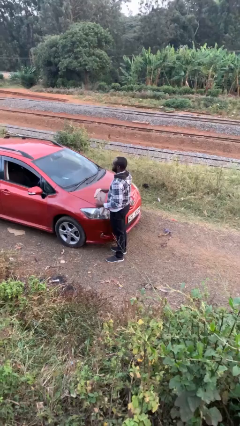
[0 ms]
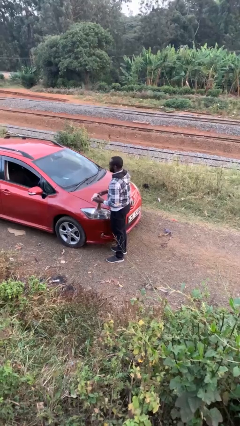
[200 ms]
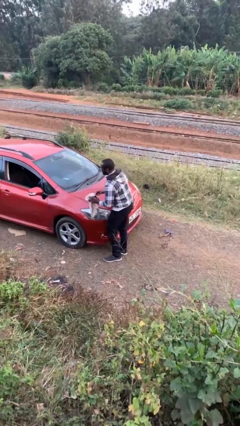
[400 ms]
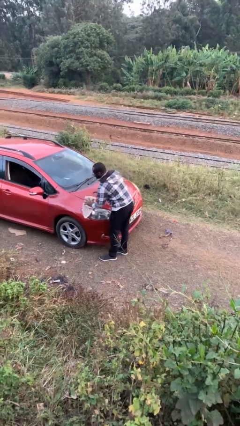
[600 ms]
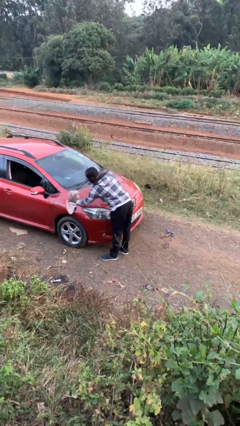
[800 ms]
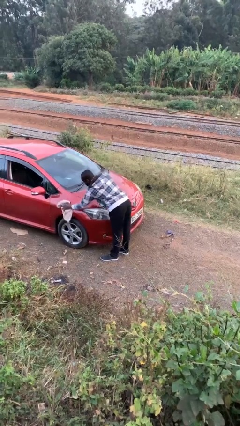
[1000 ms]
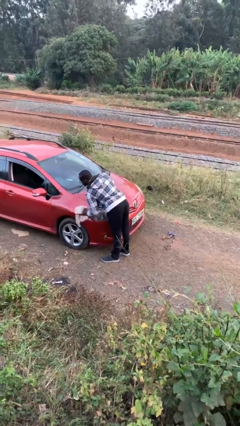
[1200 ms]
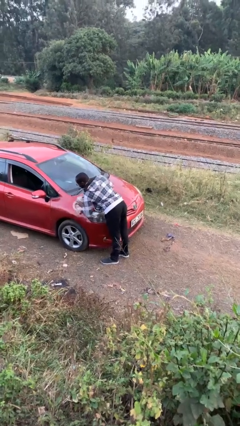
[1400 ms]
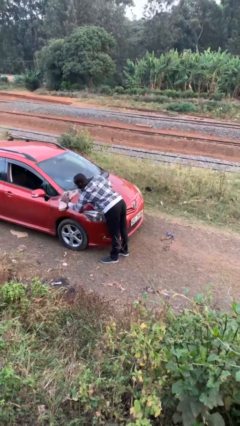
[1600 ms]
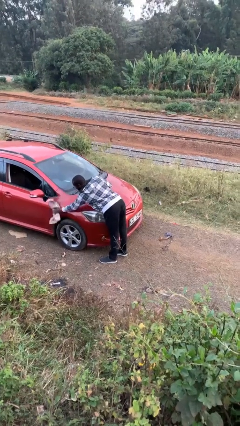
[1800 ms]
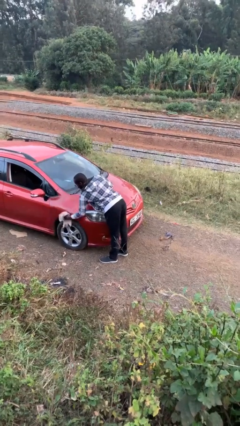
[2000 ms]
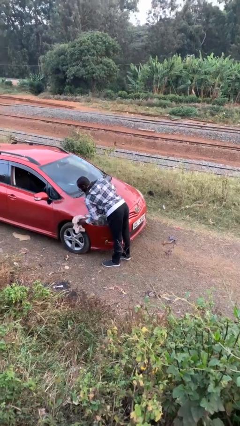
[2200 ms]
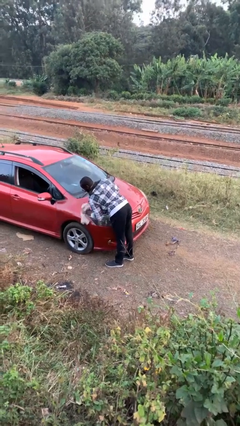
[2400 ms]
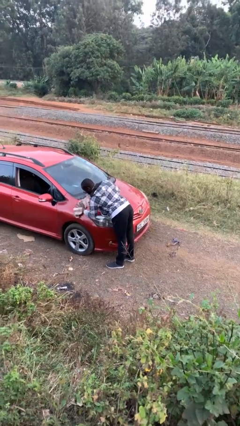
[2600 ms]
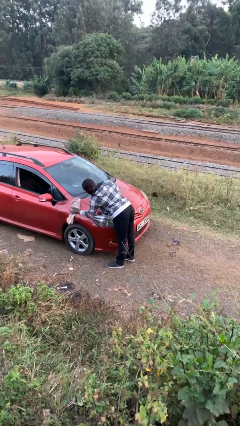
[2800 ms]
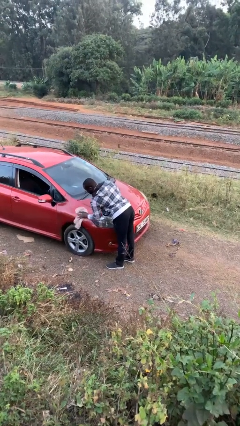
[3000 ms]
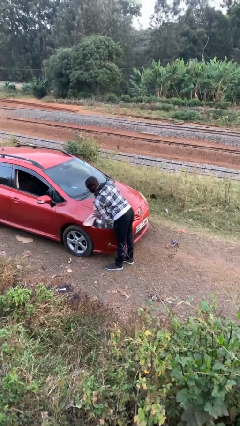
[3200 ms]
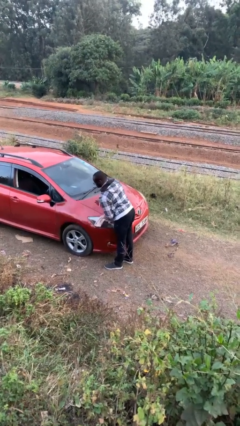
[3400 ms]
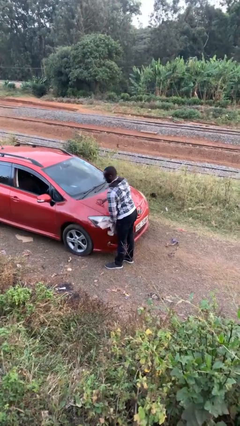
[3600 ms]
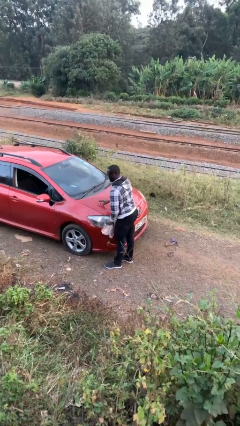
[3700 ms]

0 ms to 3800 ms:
person polishes car with rag

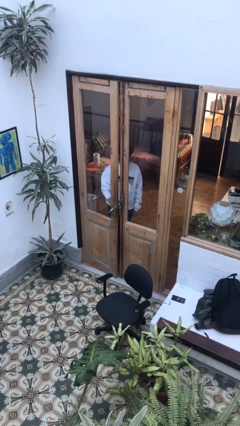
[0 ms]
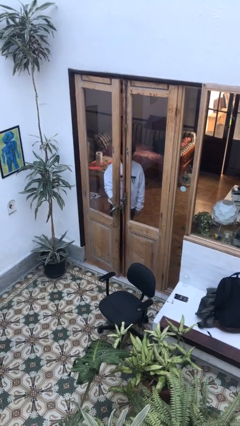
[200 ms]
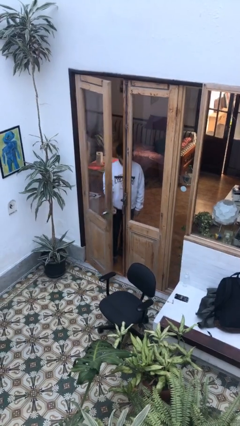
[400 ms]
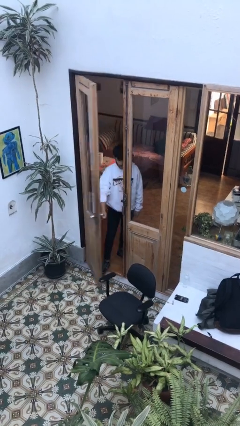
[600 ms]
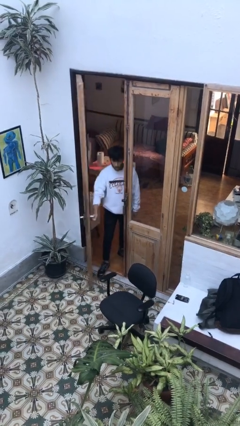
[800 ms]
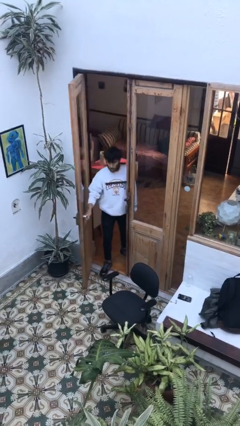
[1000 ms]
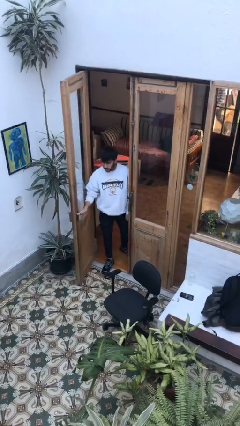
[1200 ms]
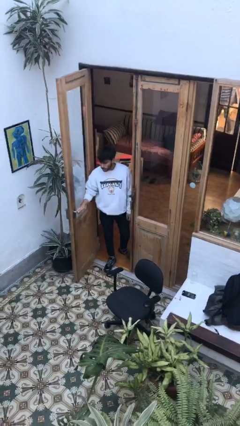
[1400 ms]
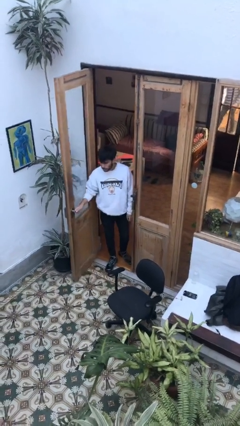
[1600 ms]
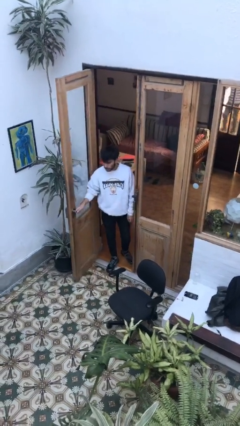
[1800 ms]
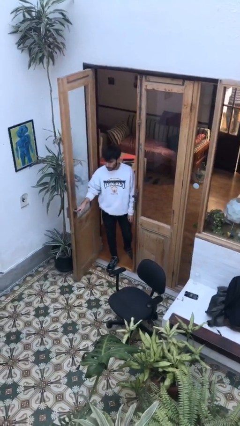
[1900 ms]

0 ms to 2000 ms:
person opens facility door

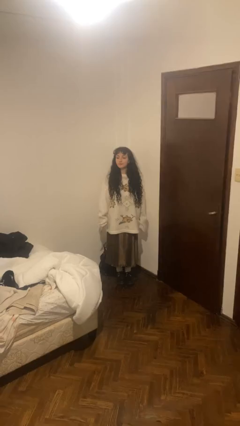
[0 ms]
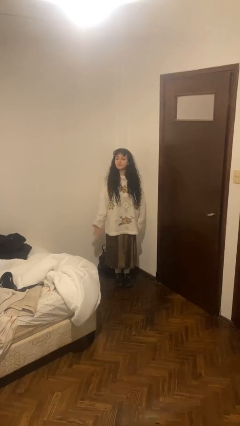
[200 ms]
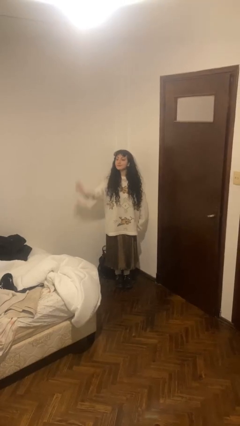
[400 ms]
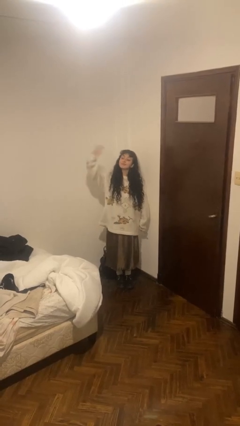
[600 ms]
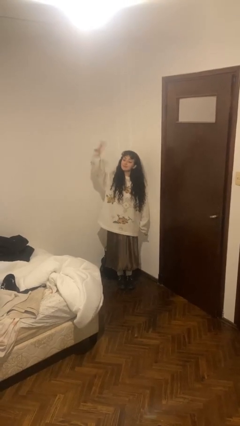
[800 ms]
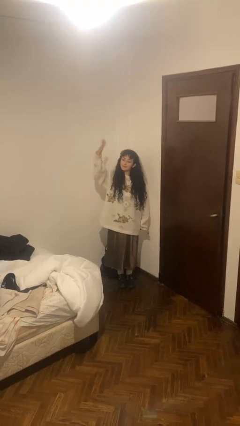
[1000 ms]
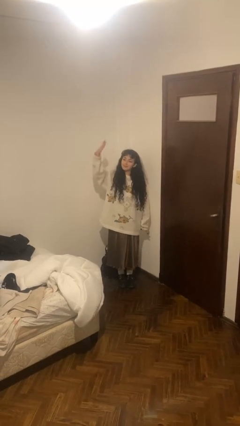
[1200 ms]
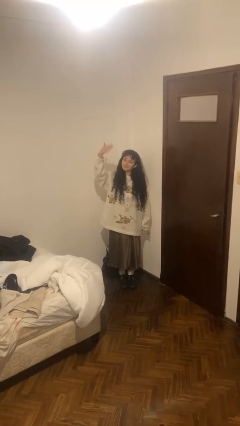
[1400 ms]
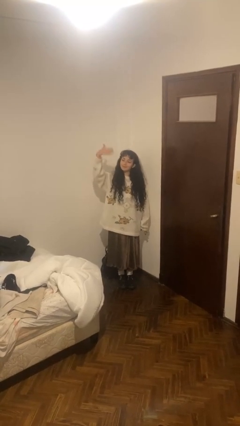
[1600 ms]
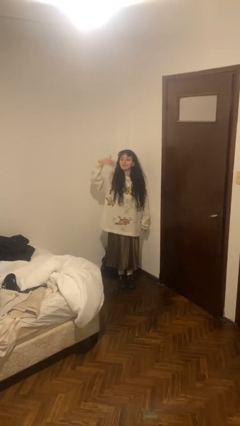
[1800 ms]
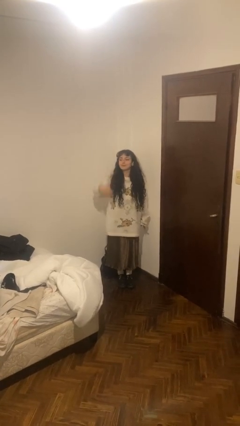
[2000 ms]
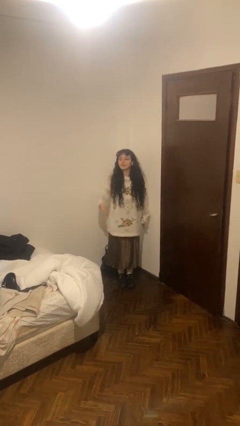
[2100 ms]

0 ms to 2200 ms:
person gestures come here

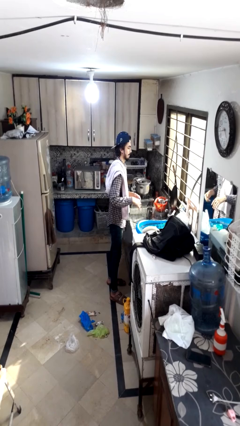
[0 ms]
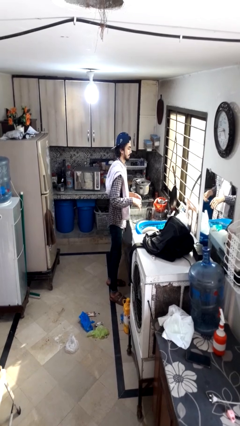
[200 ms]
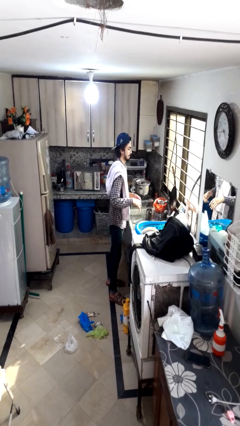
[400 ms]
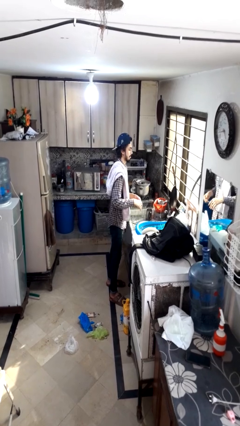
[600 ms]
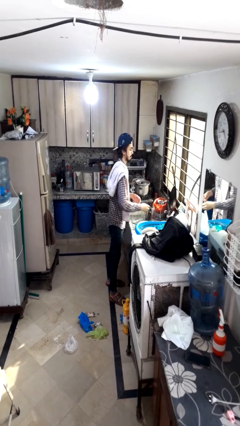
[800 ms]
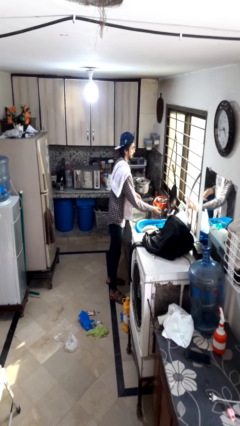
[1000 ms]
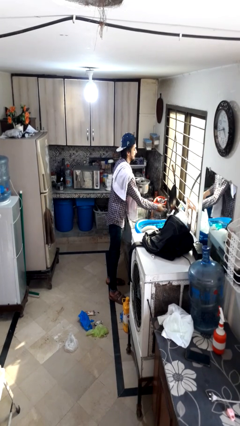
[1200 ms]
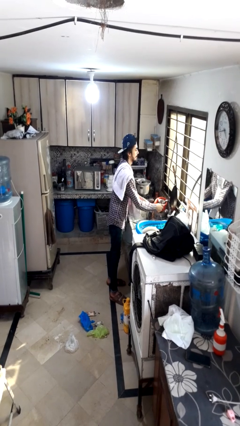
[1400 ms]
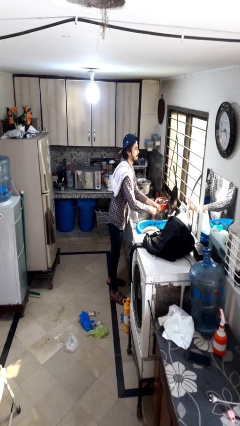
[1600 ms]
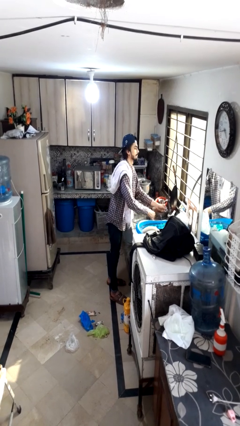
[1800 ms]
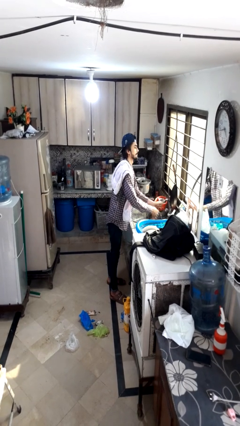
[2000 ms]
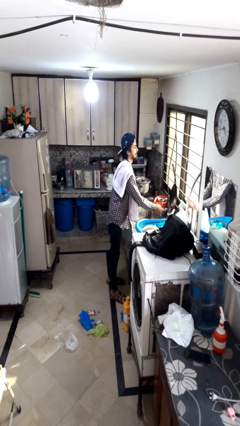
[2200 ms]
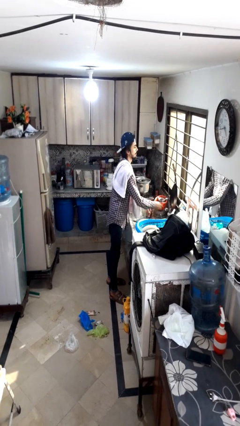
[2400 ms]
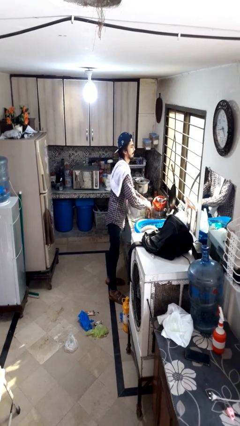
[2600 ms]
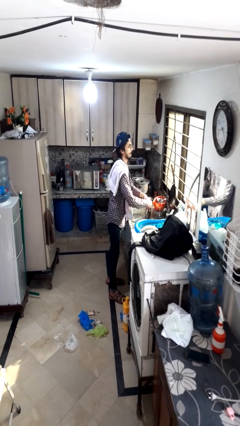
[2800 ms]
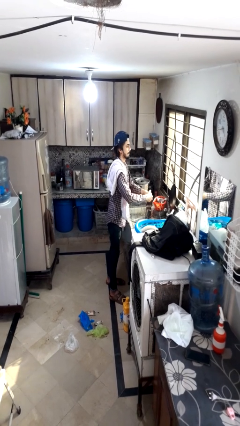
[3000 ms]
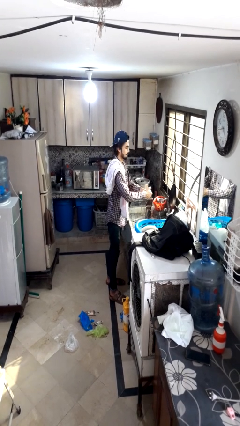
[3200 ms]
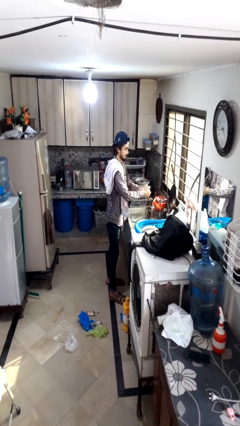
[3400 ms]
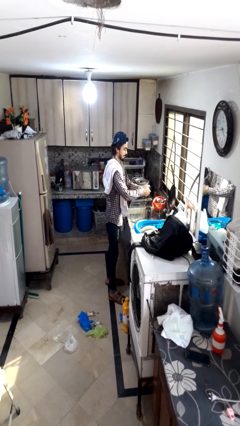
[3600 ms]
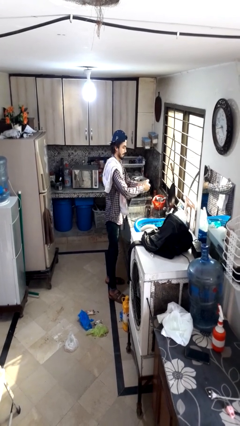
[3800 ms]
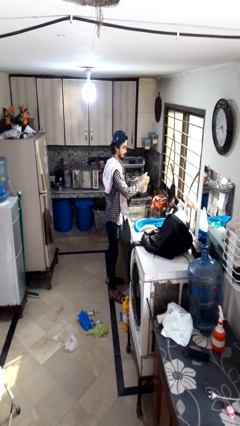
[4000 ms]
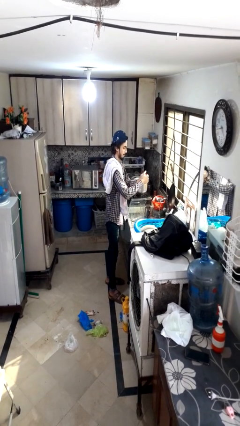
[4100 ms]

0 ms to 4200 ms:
person washes hands

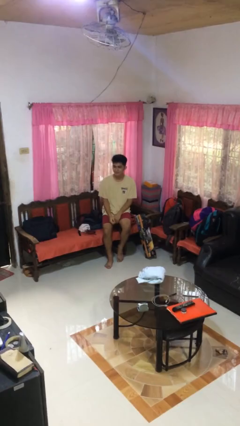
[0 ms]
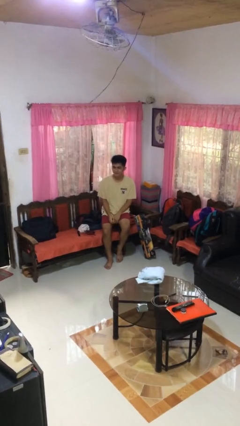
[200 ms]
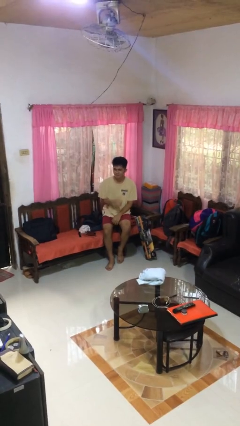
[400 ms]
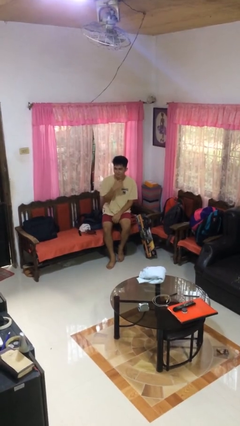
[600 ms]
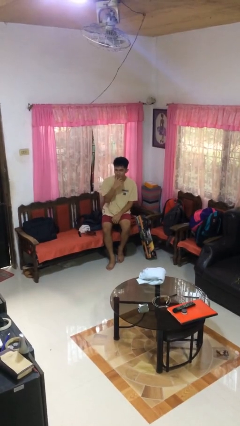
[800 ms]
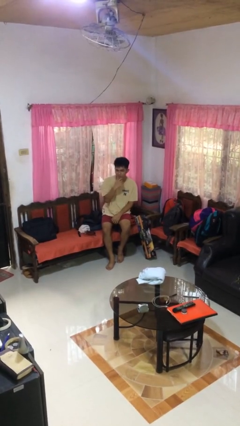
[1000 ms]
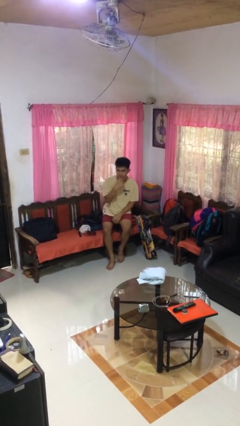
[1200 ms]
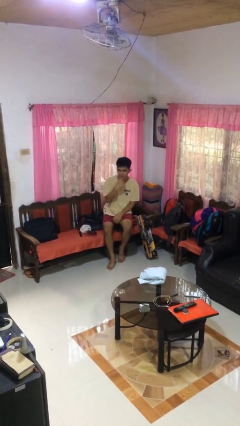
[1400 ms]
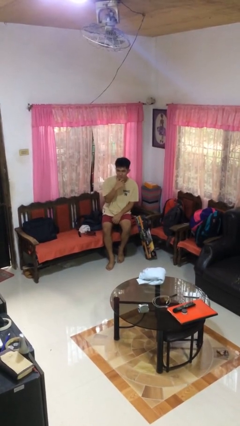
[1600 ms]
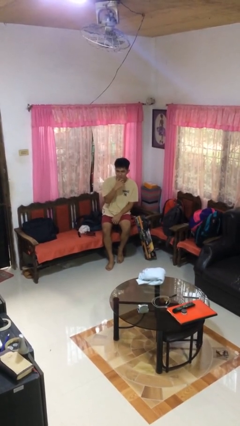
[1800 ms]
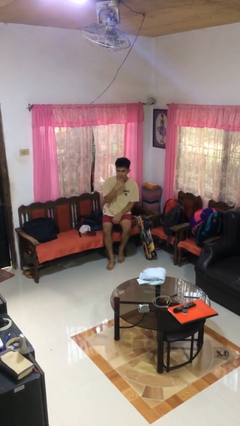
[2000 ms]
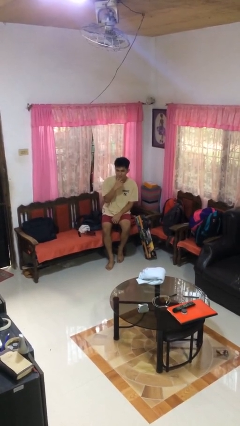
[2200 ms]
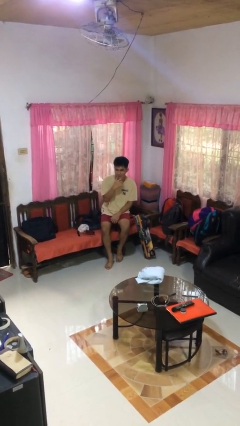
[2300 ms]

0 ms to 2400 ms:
person strokes chin

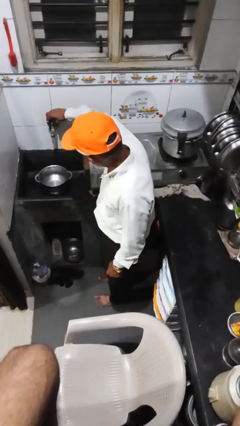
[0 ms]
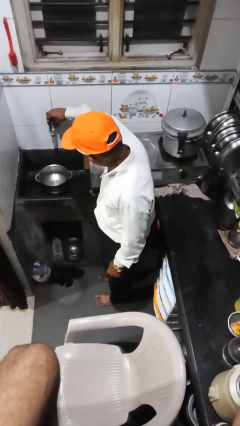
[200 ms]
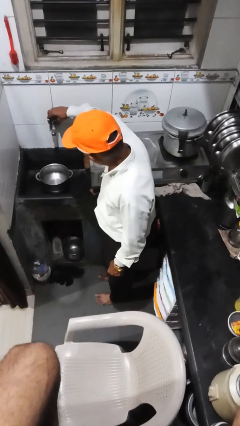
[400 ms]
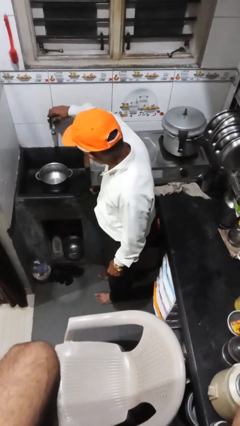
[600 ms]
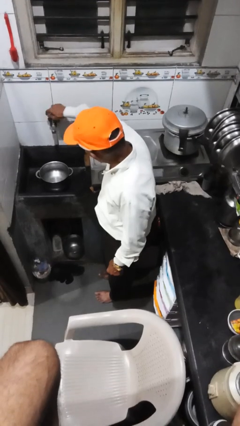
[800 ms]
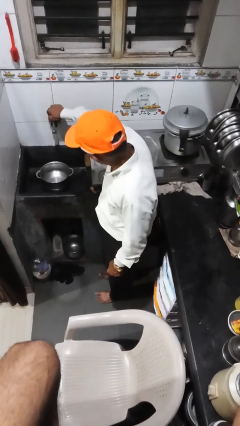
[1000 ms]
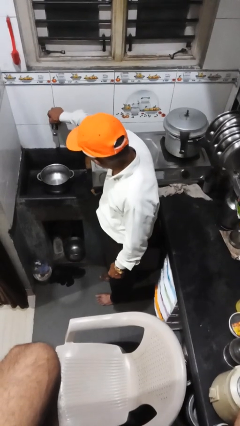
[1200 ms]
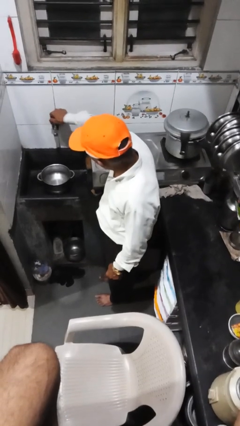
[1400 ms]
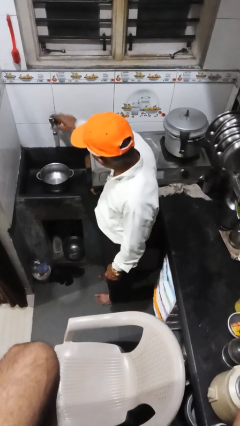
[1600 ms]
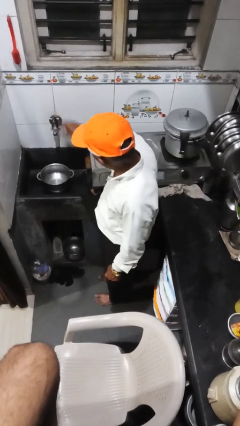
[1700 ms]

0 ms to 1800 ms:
person turns off faucet

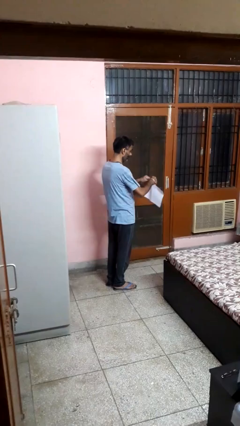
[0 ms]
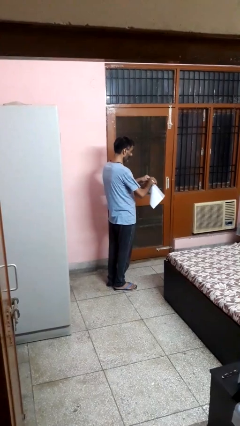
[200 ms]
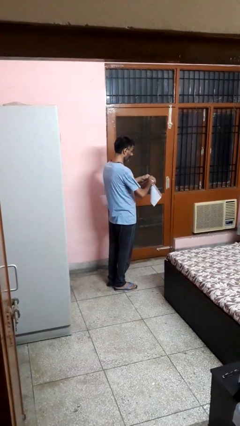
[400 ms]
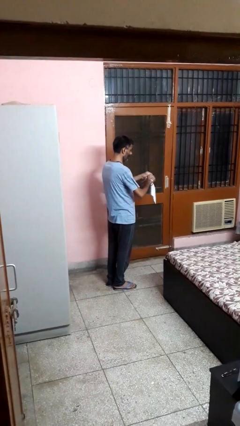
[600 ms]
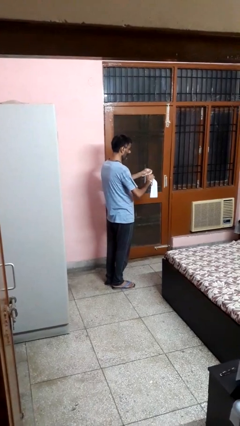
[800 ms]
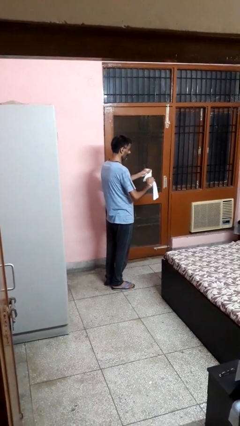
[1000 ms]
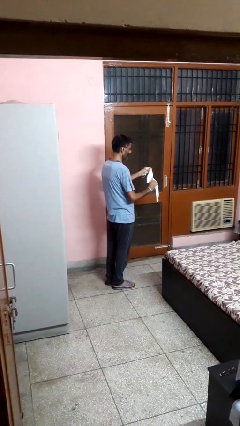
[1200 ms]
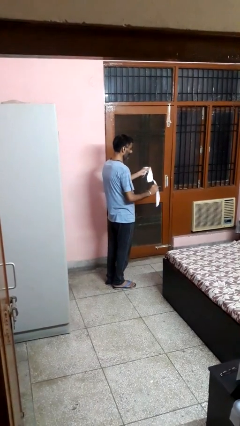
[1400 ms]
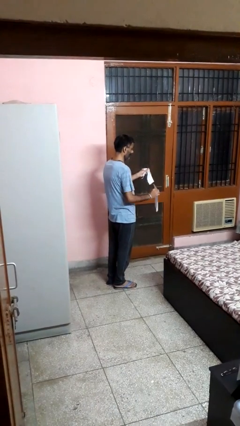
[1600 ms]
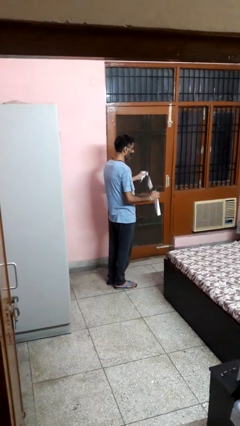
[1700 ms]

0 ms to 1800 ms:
person tears paper
